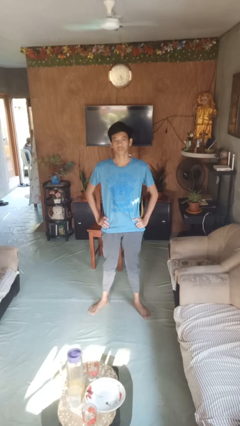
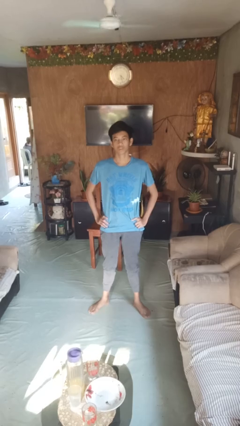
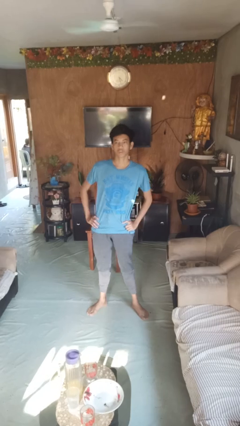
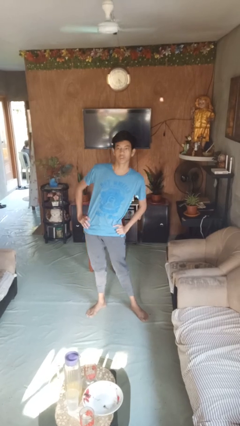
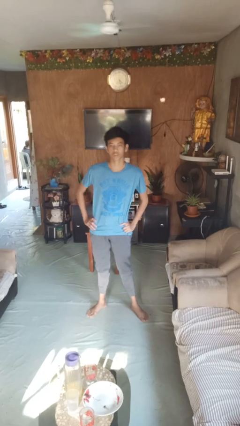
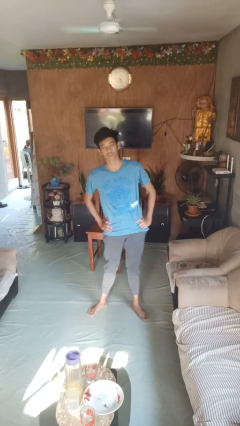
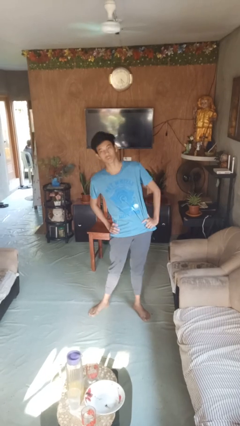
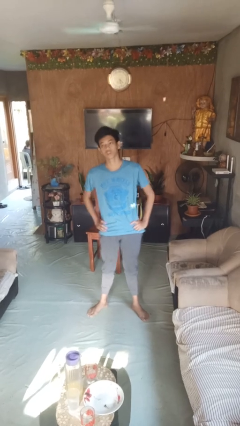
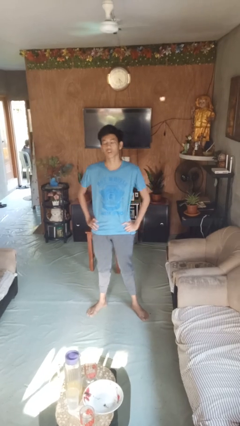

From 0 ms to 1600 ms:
person wiggles hips

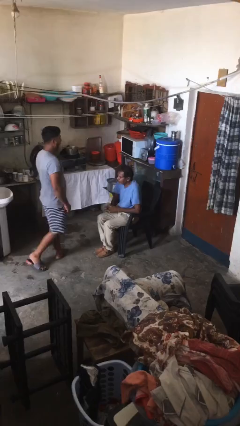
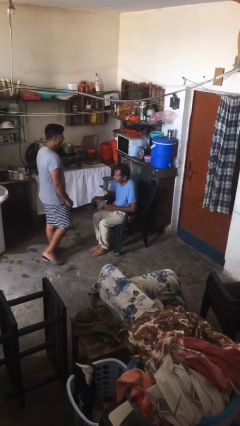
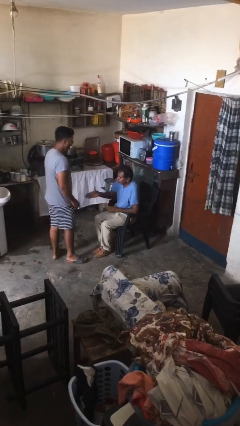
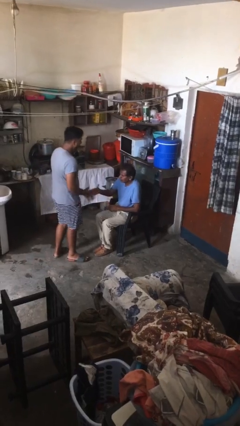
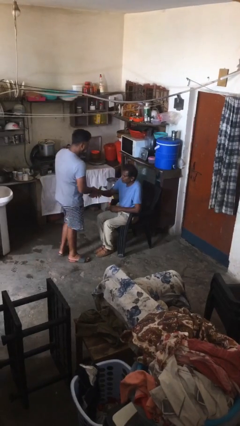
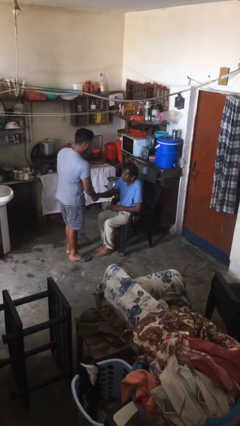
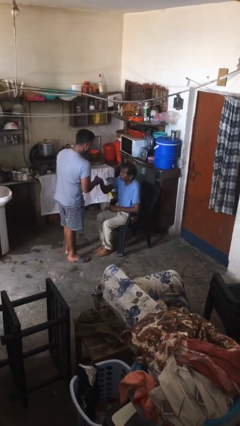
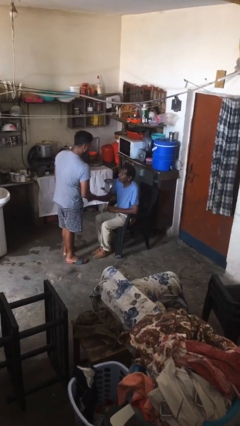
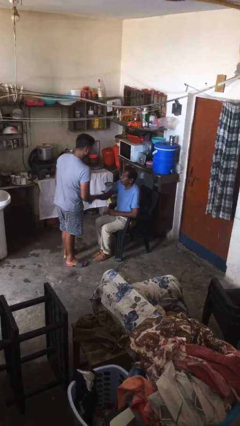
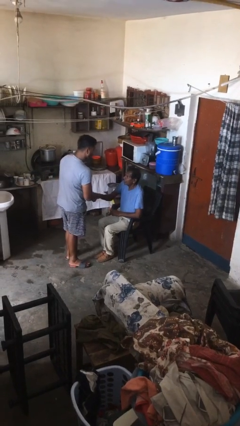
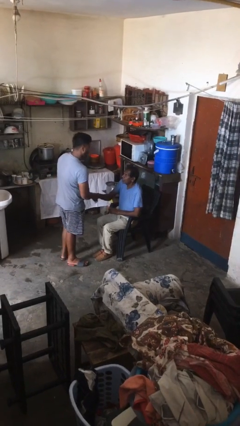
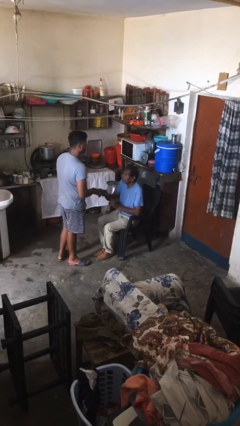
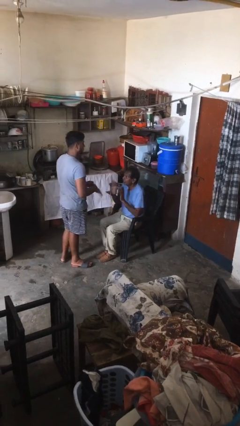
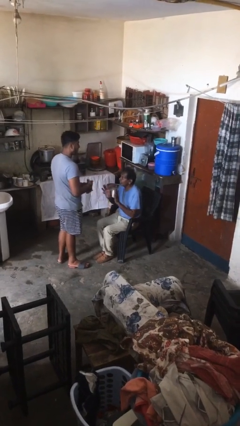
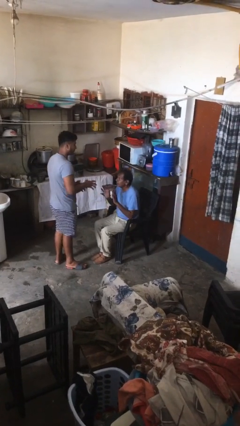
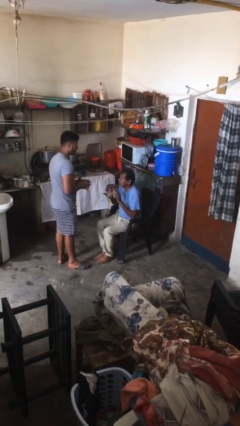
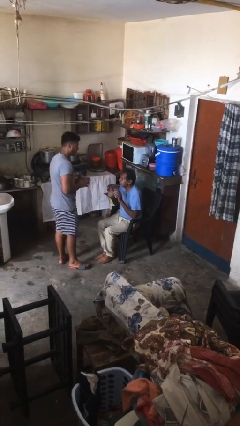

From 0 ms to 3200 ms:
person shakes hand

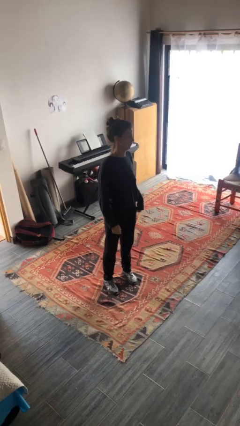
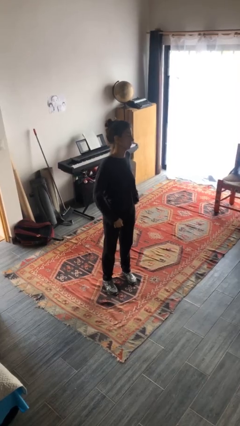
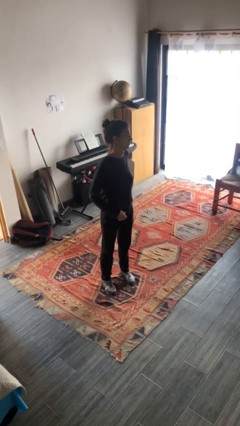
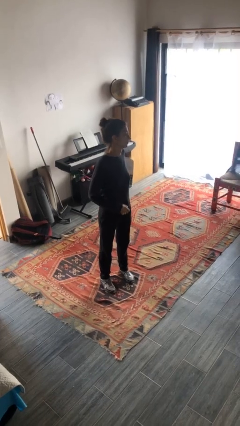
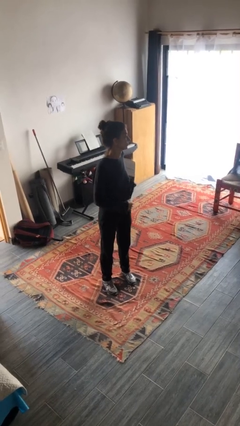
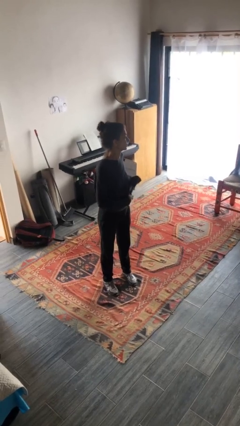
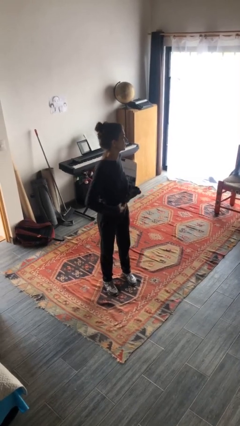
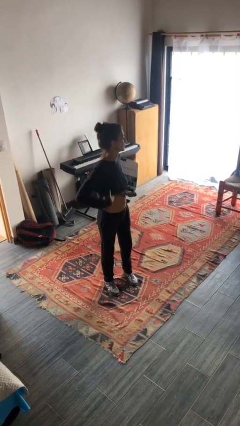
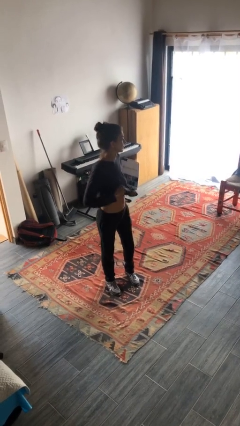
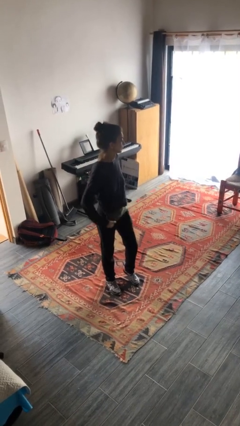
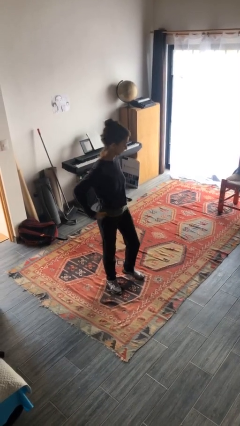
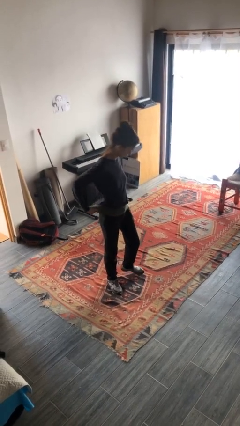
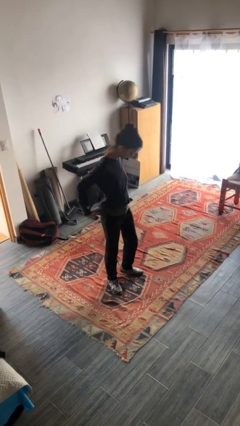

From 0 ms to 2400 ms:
person untucks shirt

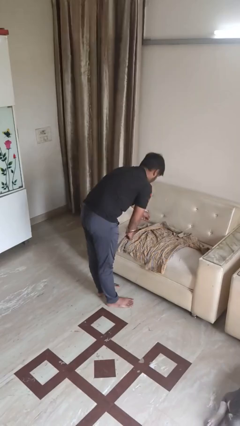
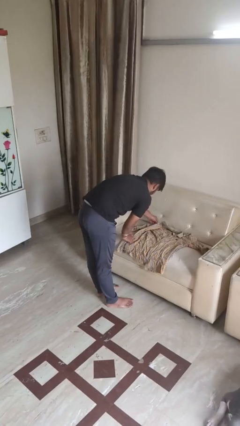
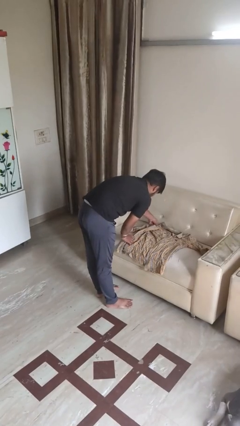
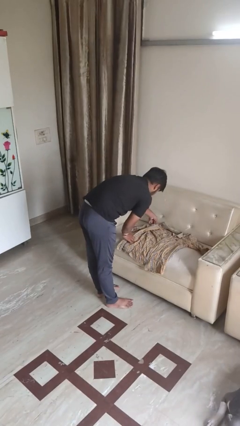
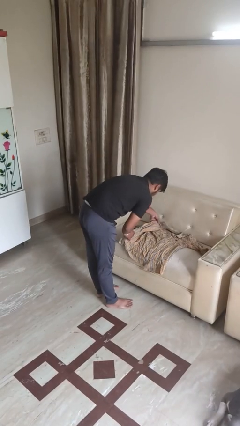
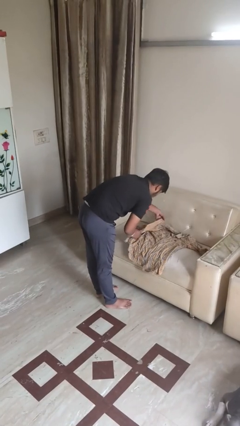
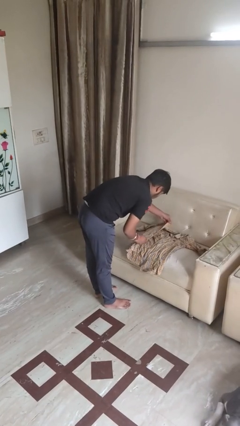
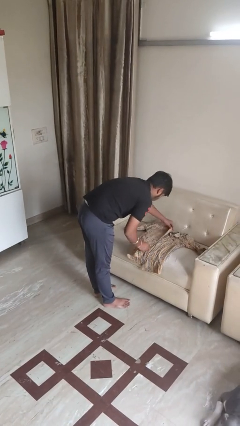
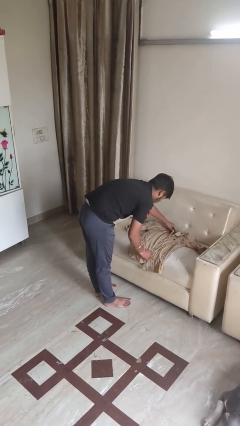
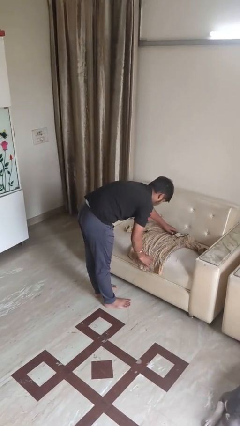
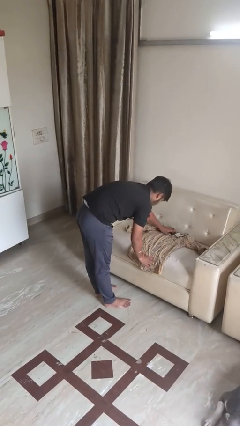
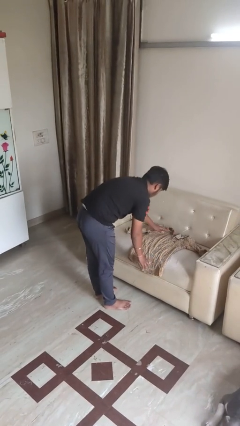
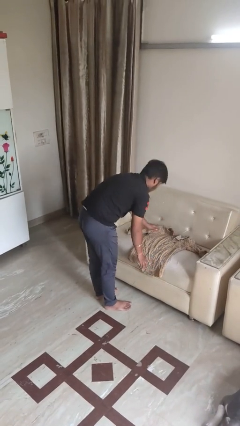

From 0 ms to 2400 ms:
person folds shirt

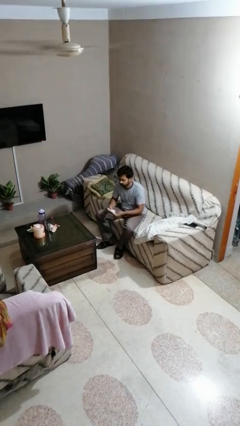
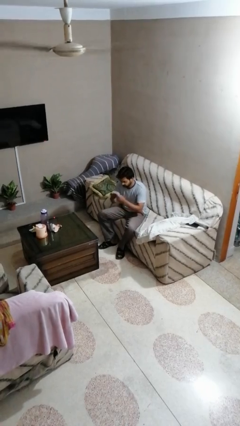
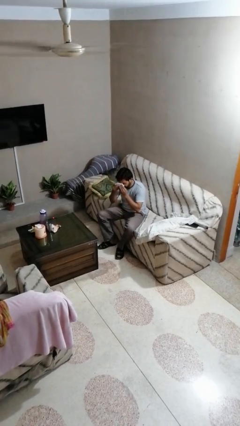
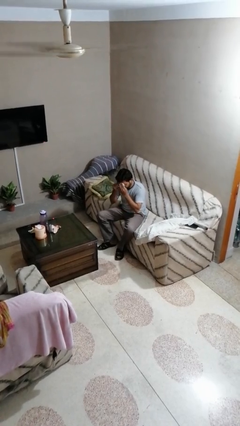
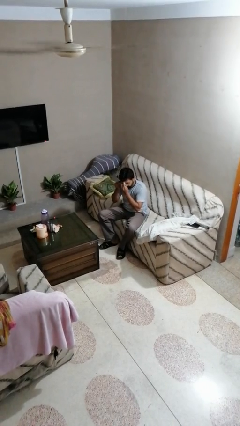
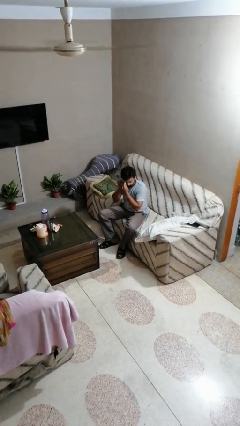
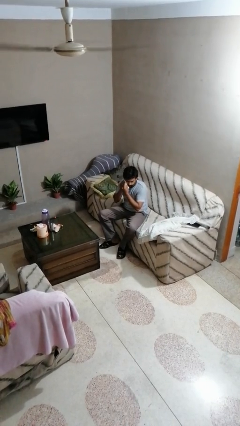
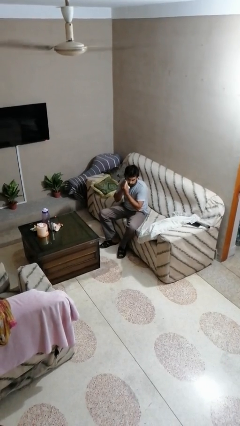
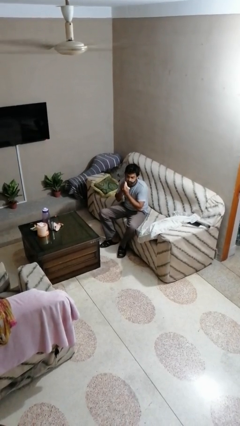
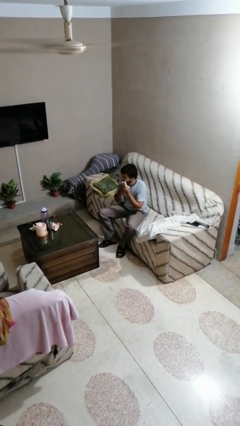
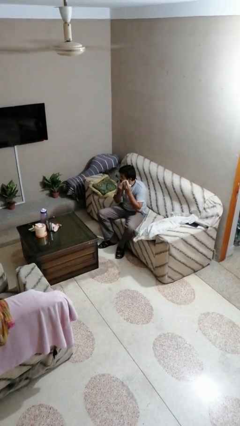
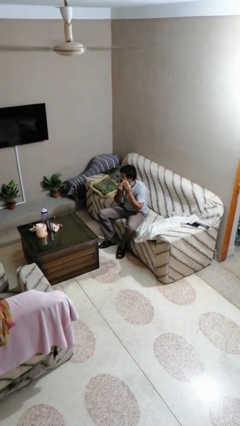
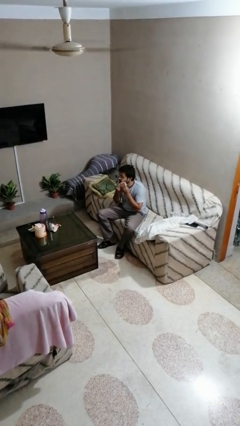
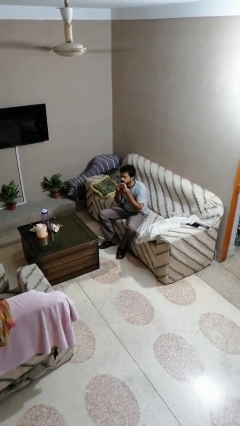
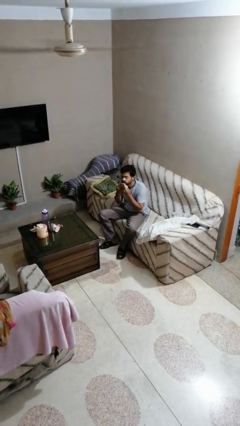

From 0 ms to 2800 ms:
person wipes mouth with napkin

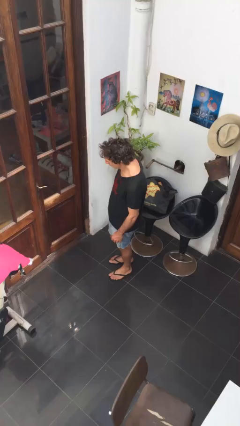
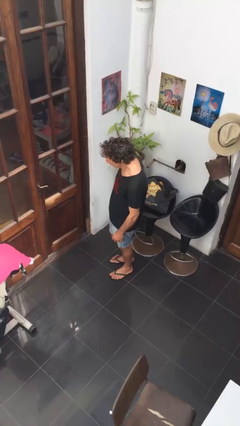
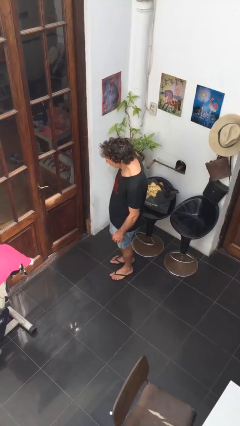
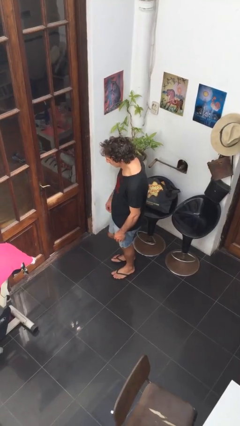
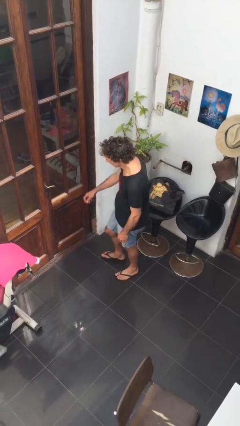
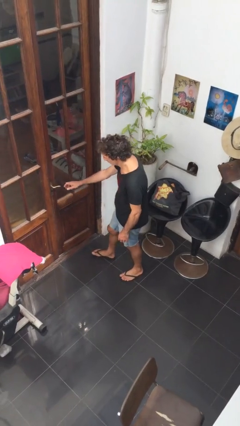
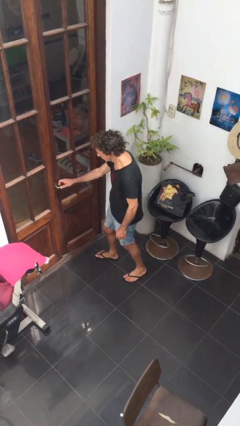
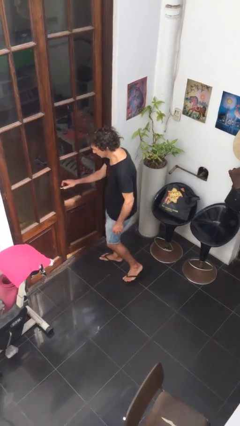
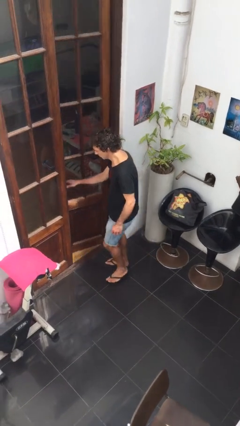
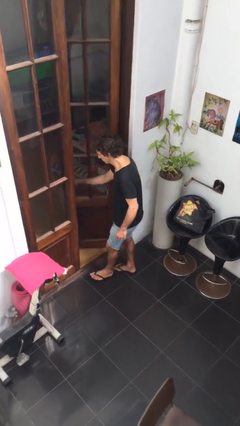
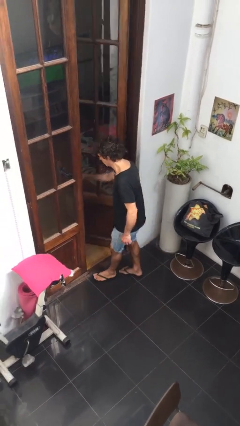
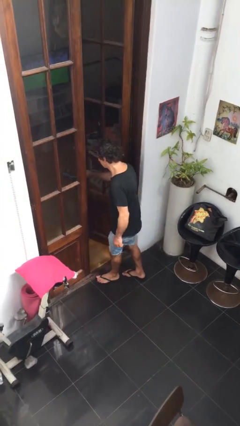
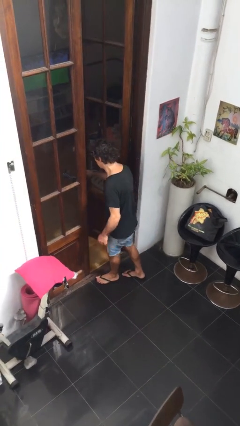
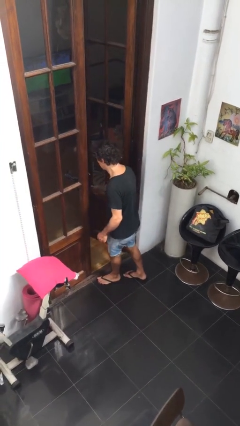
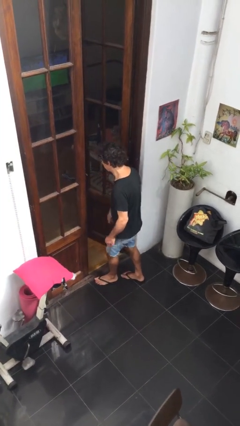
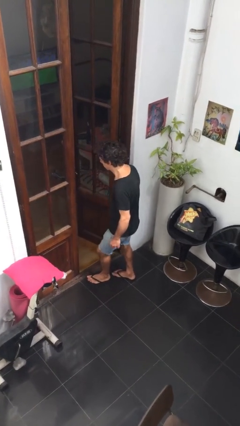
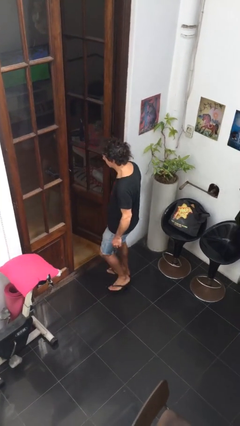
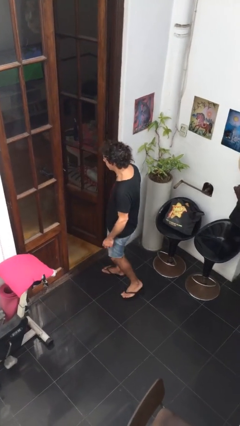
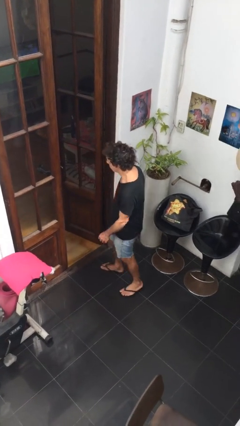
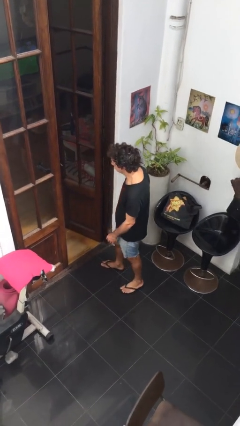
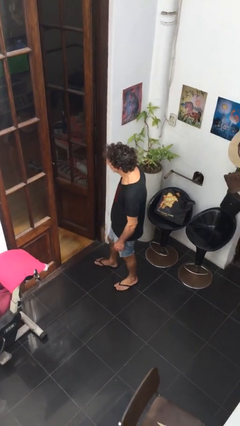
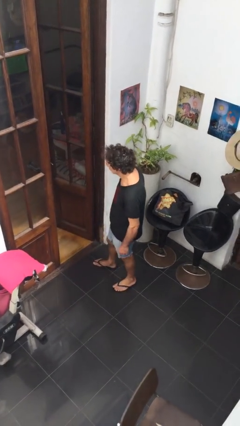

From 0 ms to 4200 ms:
person opens facility door

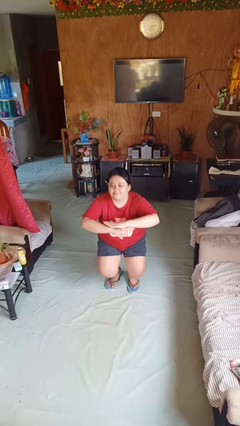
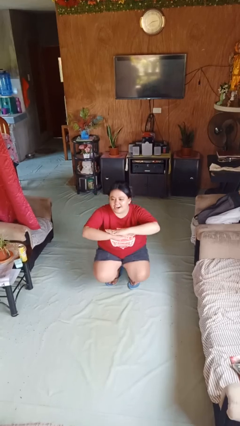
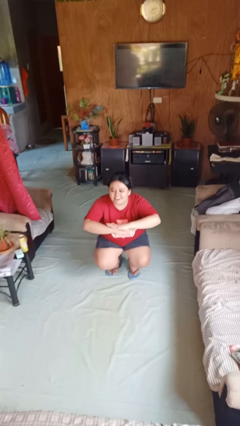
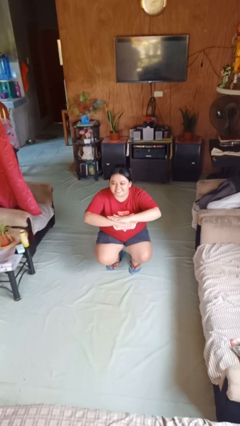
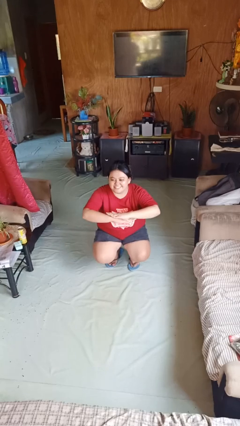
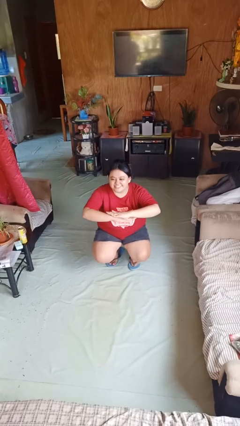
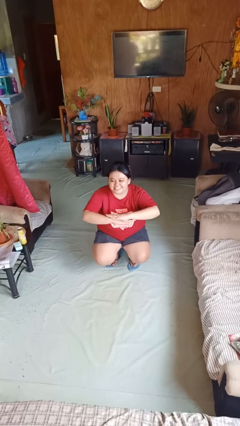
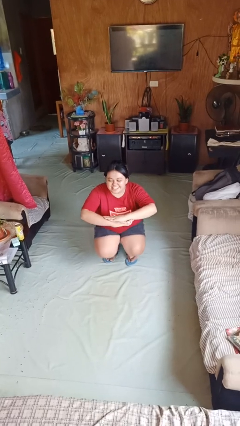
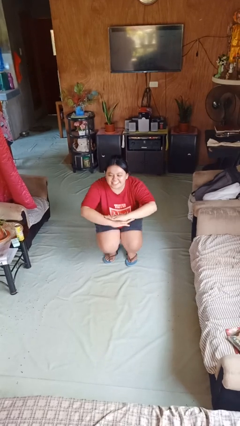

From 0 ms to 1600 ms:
person squats
